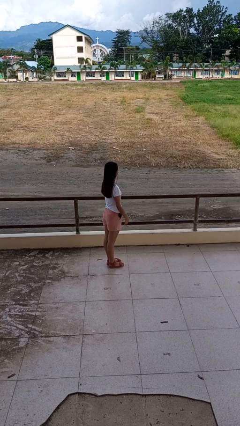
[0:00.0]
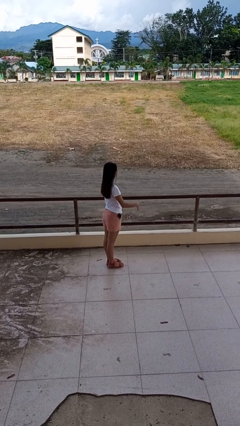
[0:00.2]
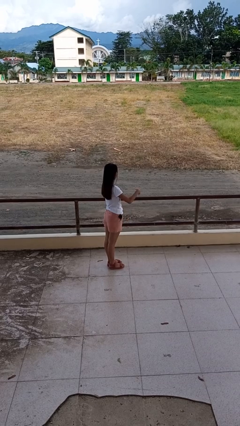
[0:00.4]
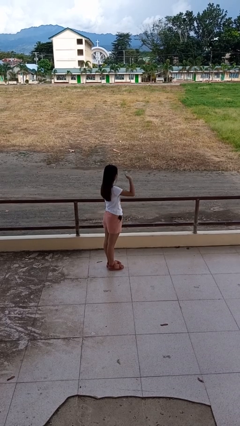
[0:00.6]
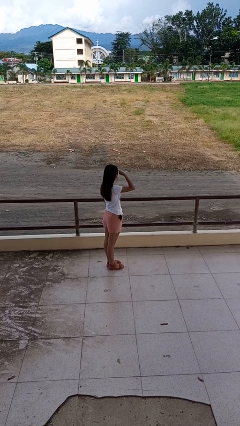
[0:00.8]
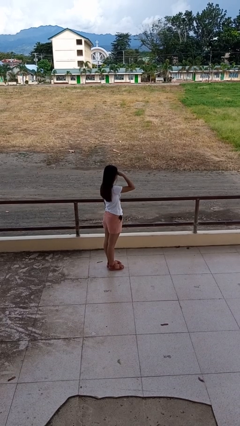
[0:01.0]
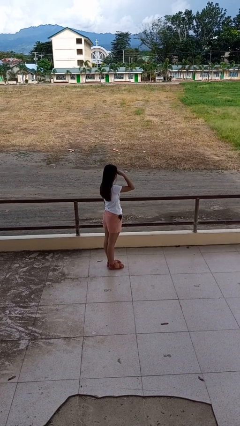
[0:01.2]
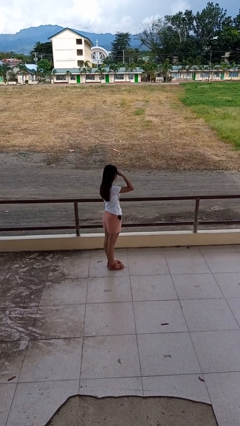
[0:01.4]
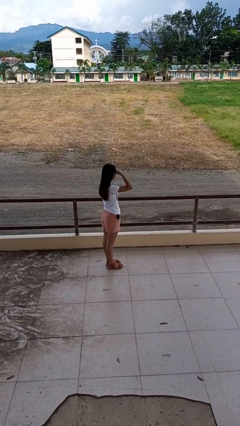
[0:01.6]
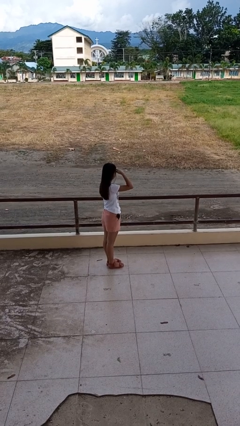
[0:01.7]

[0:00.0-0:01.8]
person shades eyes

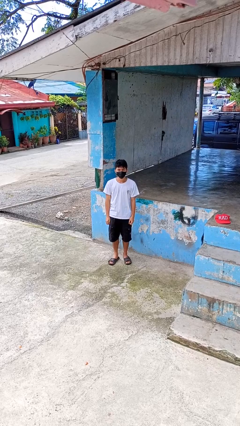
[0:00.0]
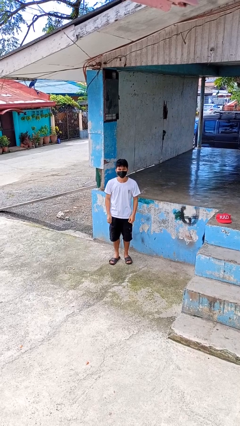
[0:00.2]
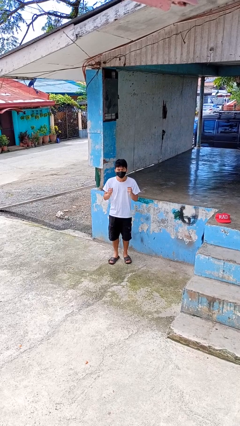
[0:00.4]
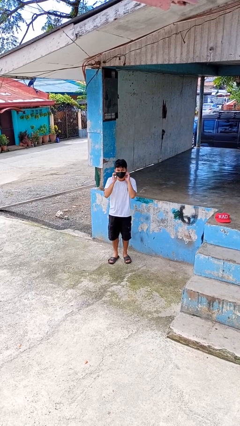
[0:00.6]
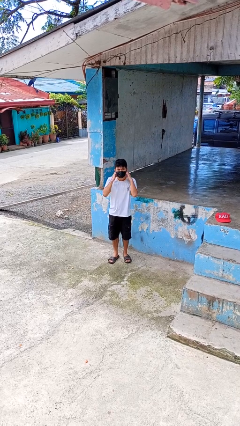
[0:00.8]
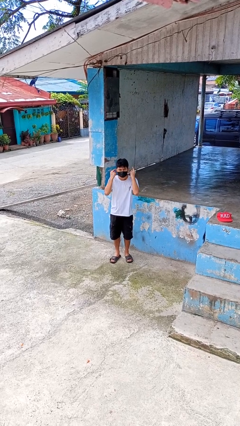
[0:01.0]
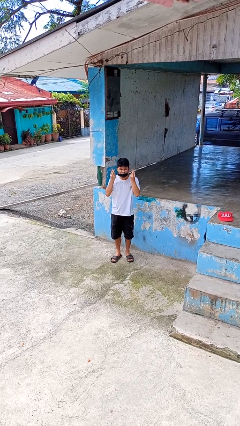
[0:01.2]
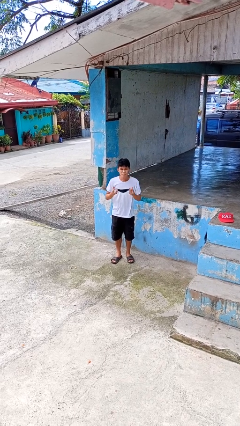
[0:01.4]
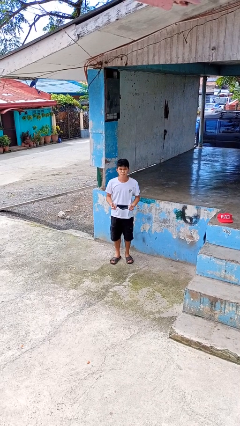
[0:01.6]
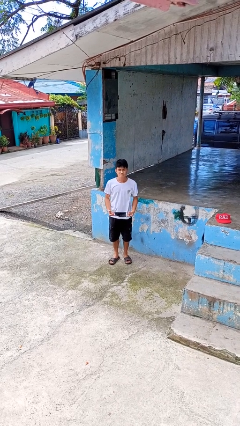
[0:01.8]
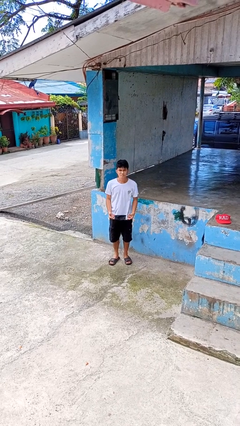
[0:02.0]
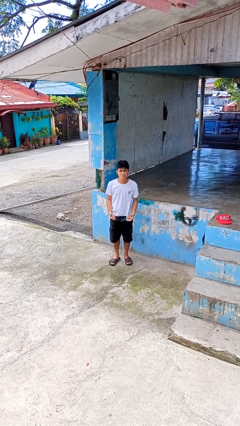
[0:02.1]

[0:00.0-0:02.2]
person takes off facemask

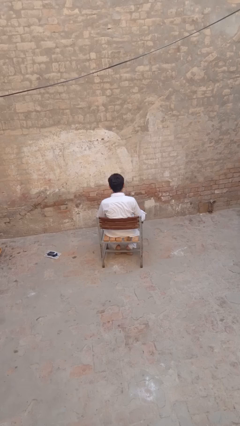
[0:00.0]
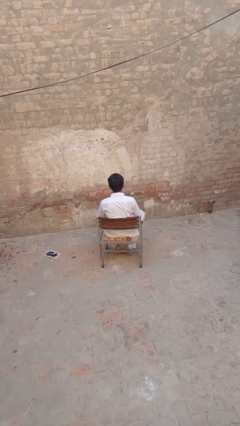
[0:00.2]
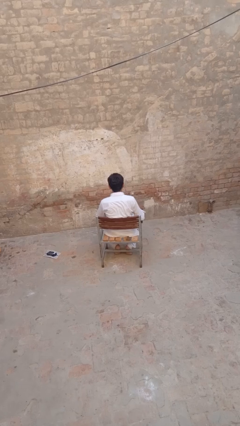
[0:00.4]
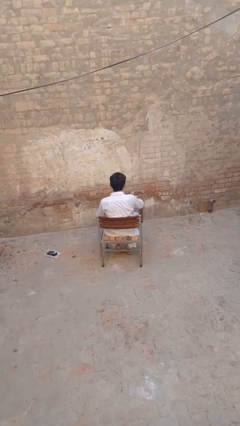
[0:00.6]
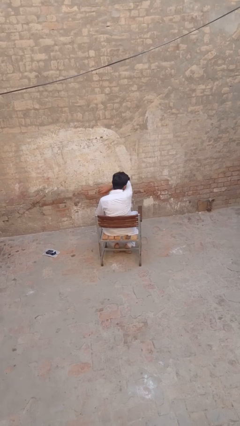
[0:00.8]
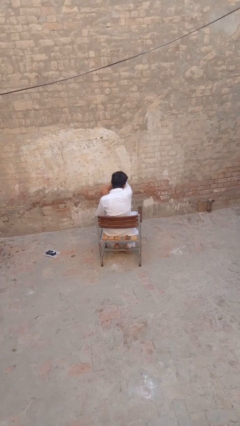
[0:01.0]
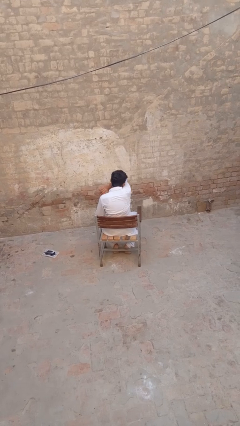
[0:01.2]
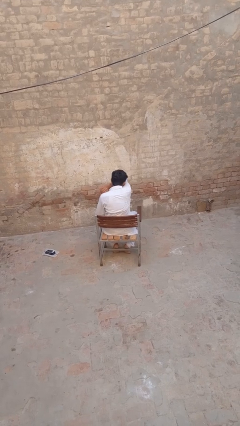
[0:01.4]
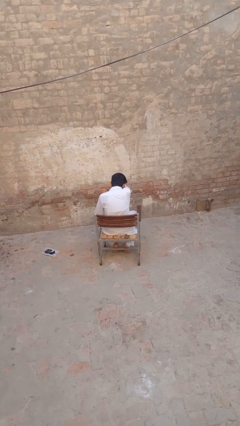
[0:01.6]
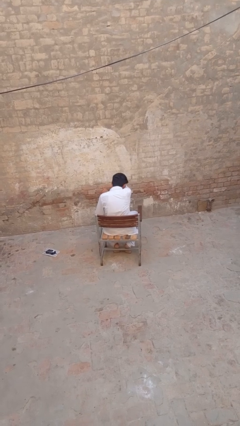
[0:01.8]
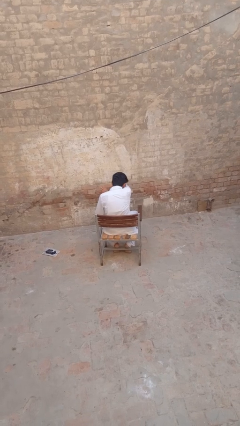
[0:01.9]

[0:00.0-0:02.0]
person sneezes into arm

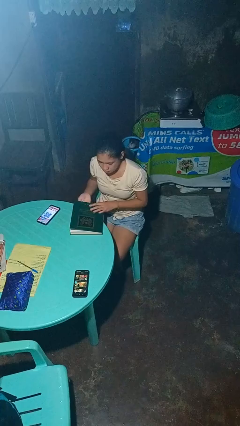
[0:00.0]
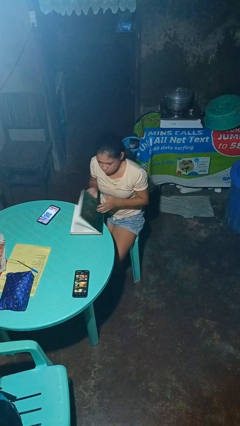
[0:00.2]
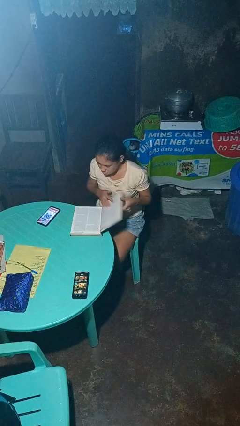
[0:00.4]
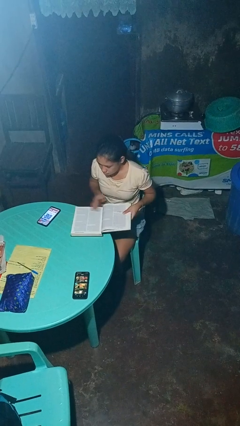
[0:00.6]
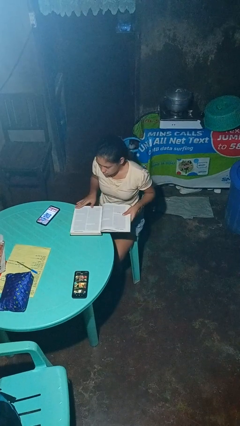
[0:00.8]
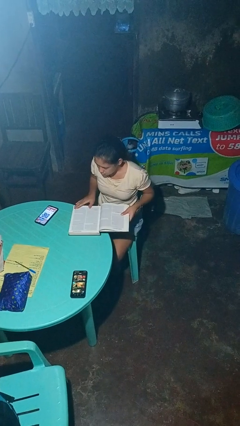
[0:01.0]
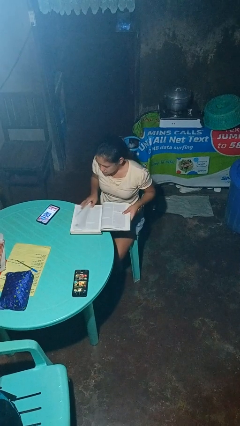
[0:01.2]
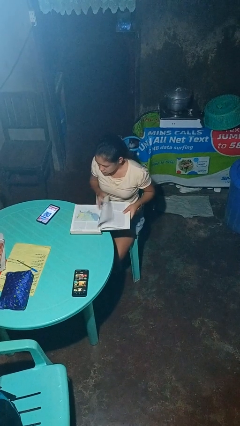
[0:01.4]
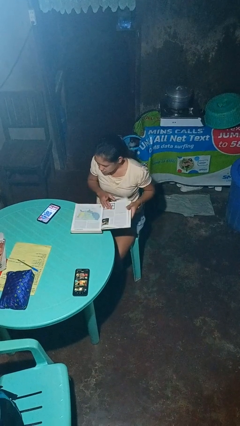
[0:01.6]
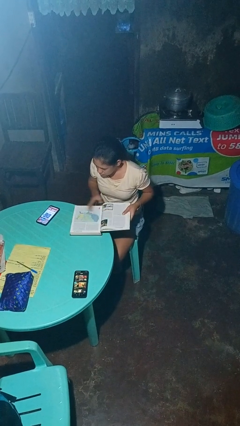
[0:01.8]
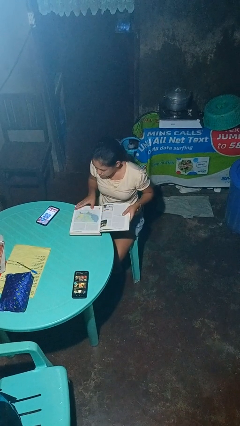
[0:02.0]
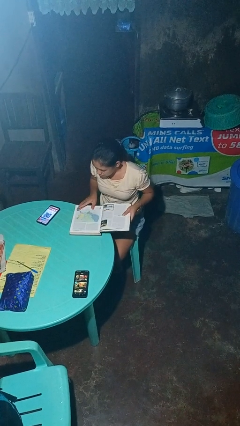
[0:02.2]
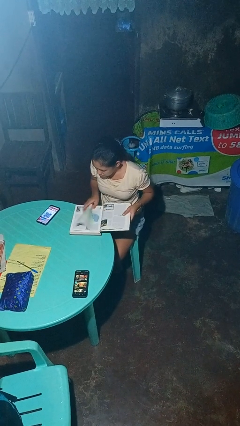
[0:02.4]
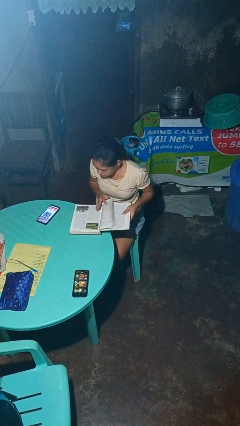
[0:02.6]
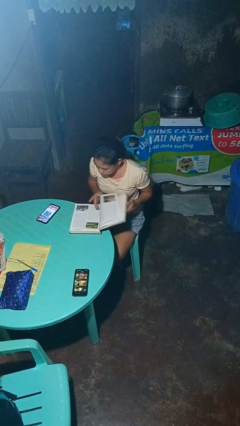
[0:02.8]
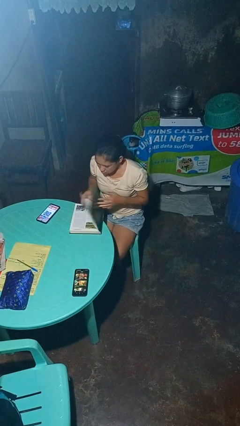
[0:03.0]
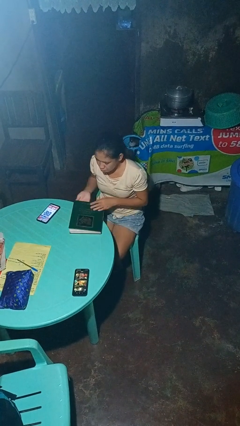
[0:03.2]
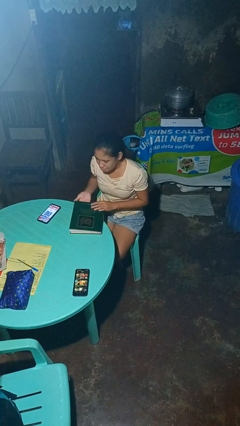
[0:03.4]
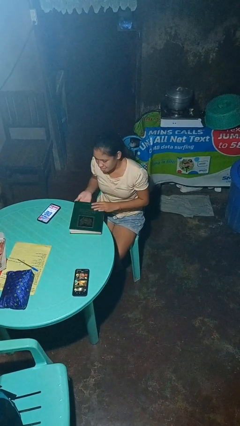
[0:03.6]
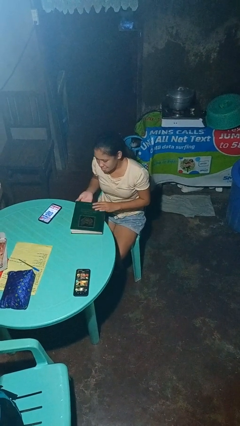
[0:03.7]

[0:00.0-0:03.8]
person reads book

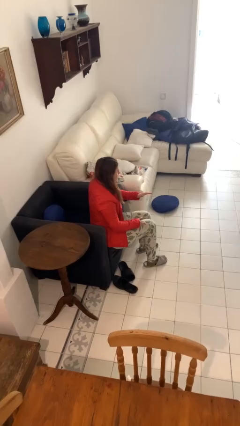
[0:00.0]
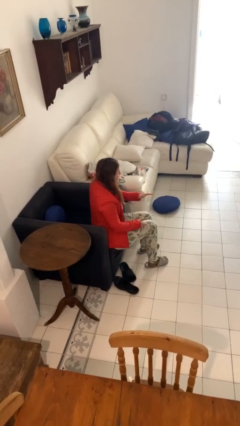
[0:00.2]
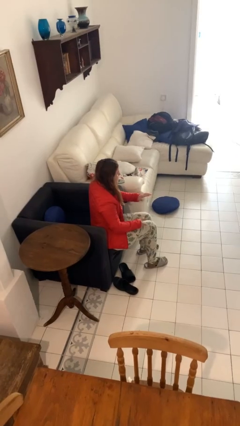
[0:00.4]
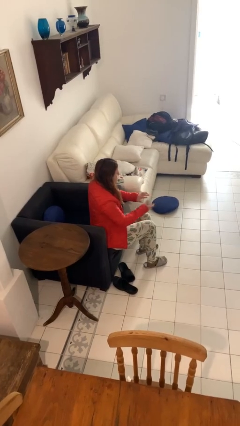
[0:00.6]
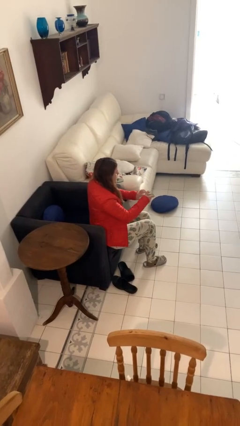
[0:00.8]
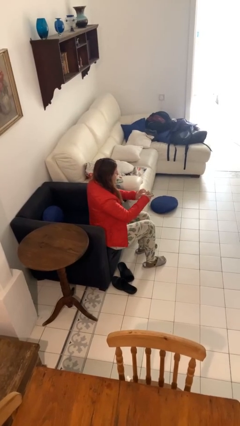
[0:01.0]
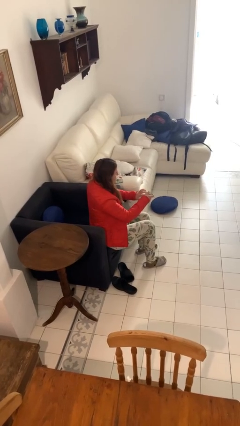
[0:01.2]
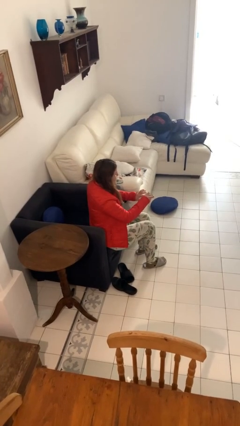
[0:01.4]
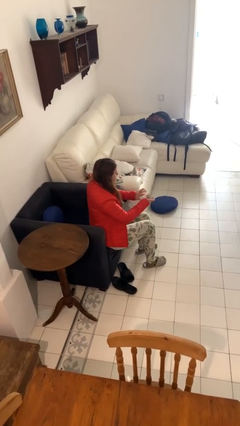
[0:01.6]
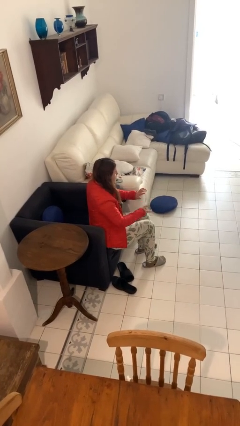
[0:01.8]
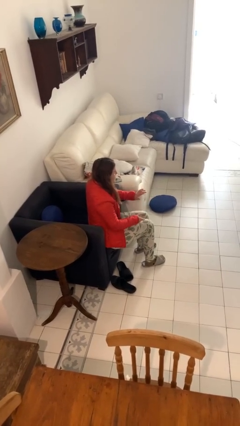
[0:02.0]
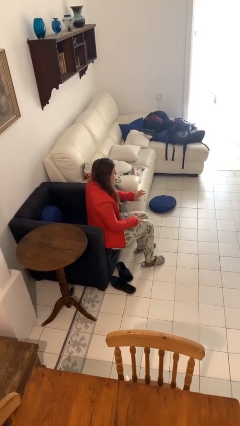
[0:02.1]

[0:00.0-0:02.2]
person clips fingernails

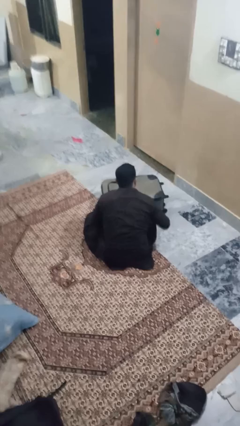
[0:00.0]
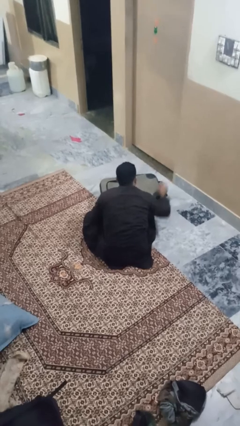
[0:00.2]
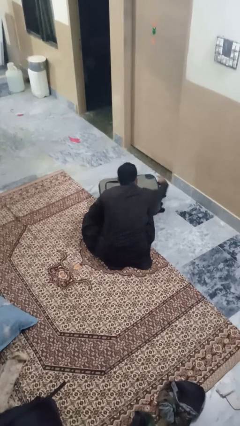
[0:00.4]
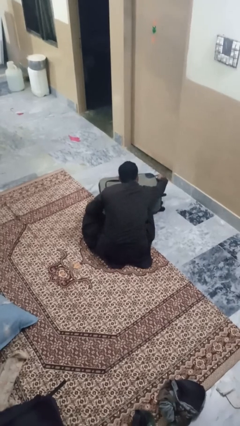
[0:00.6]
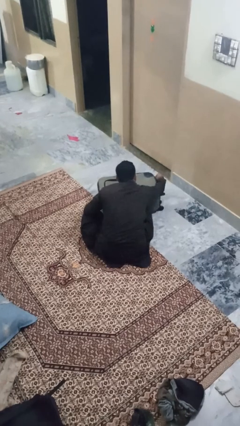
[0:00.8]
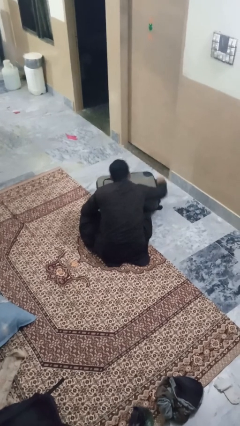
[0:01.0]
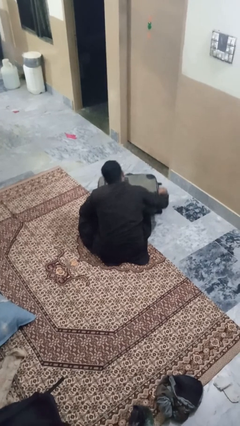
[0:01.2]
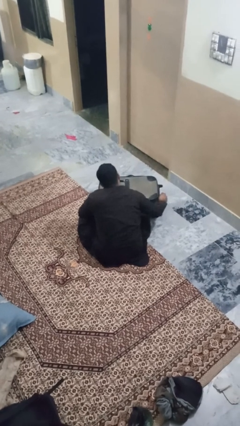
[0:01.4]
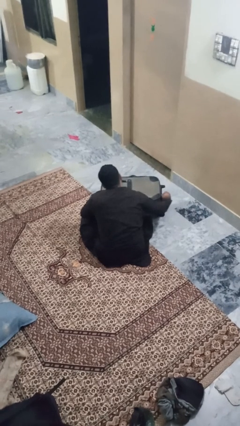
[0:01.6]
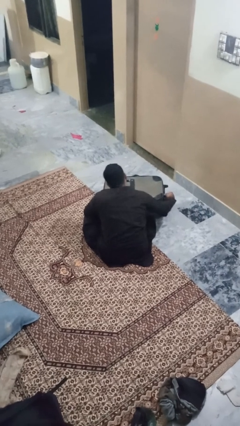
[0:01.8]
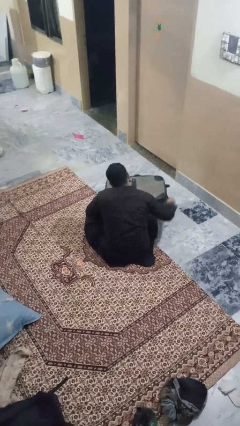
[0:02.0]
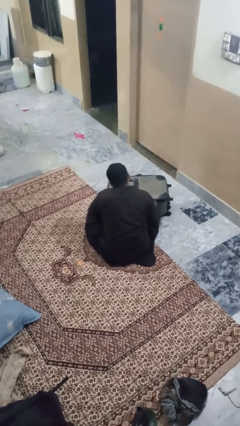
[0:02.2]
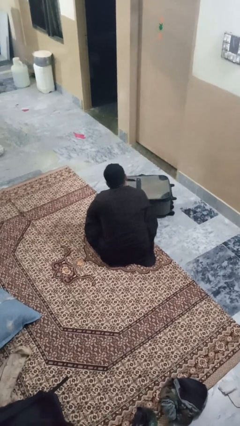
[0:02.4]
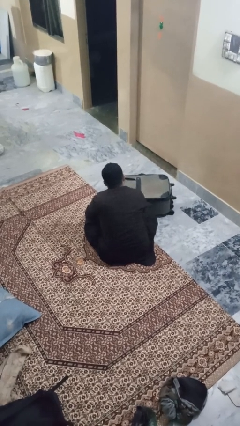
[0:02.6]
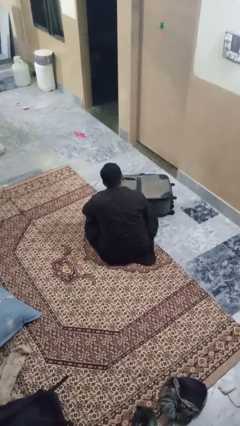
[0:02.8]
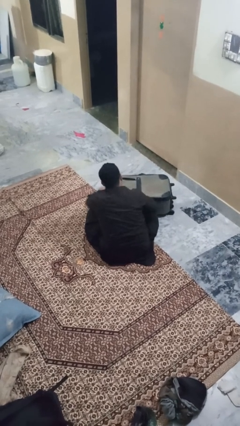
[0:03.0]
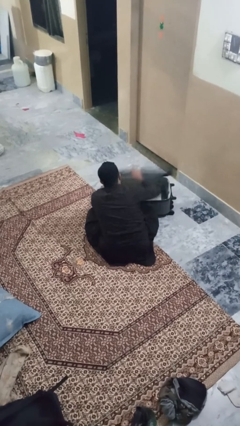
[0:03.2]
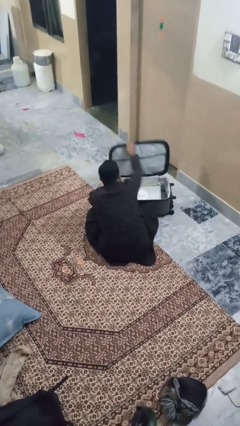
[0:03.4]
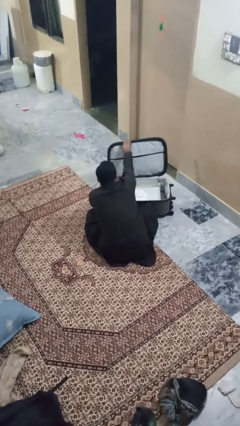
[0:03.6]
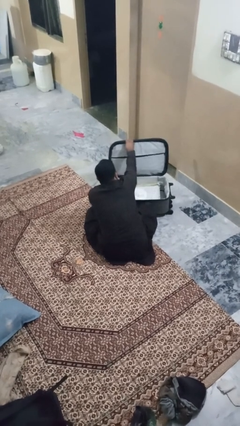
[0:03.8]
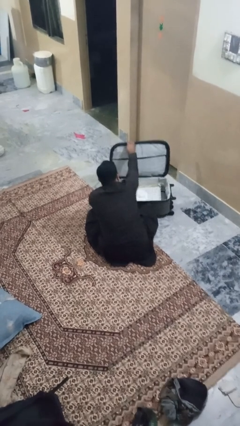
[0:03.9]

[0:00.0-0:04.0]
person opens suitcase

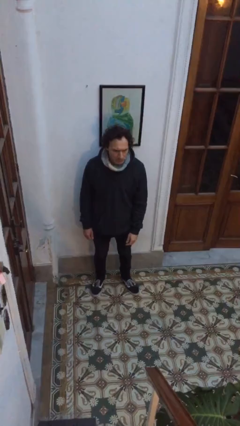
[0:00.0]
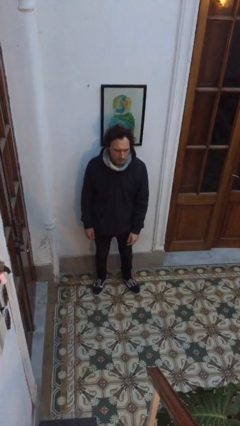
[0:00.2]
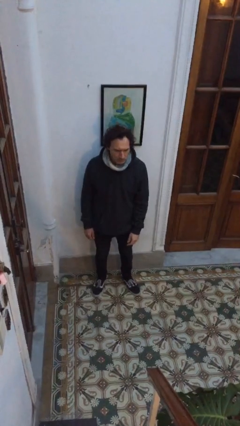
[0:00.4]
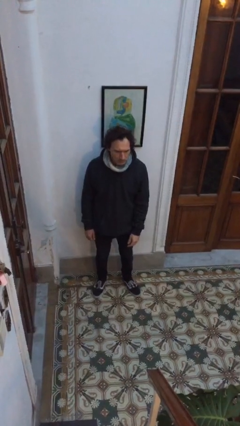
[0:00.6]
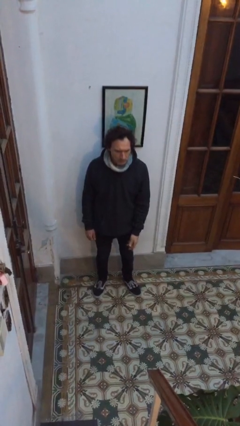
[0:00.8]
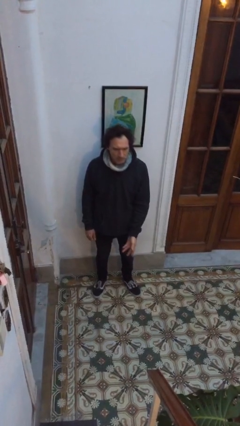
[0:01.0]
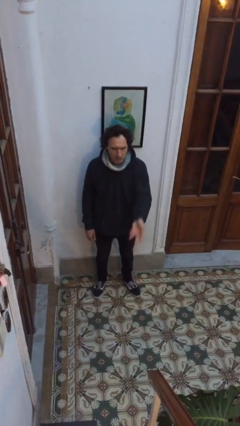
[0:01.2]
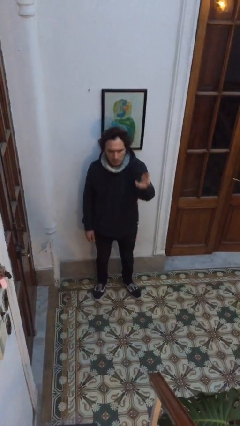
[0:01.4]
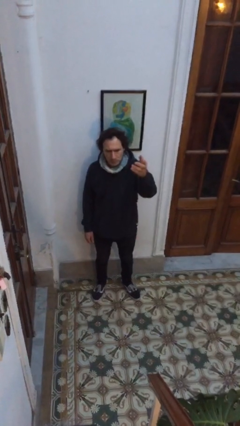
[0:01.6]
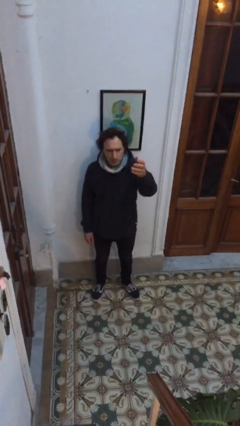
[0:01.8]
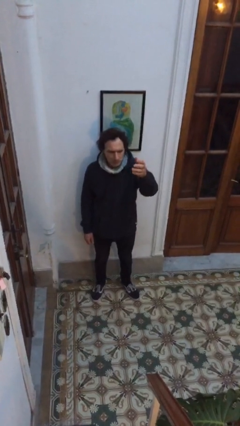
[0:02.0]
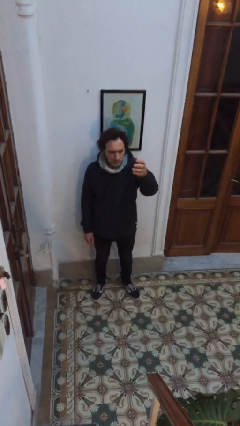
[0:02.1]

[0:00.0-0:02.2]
person gestures swipe up
